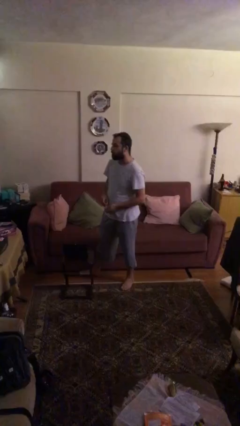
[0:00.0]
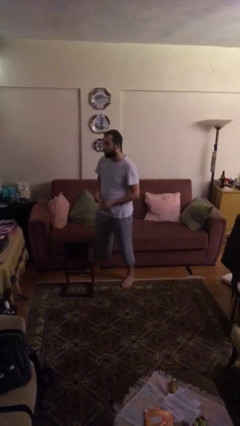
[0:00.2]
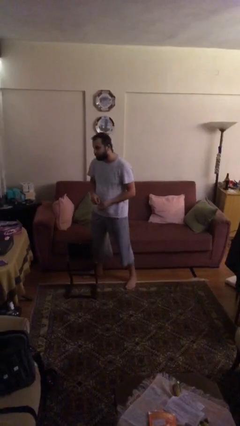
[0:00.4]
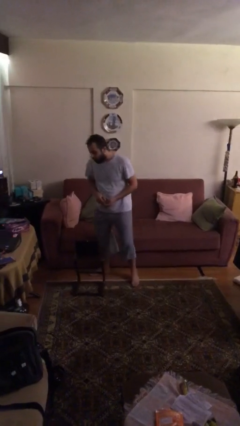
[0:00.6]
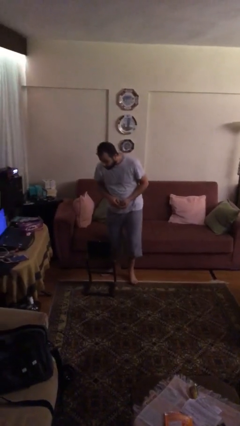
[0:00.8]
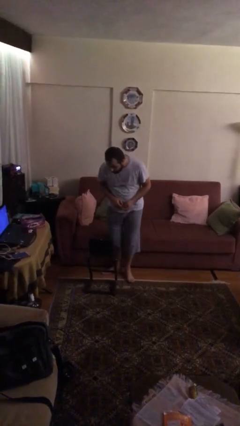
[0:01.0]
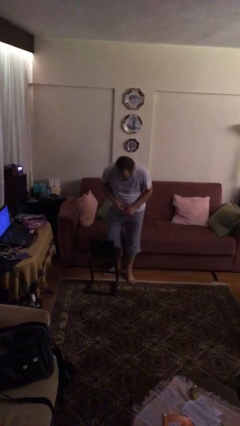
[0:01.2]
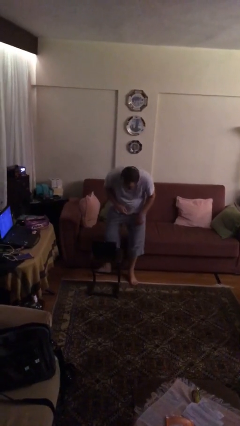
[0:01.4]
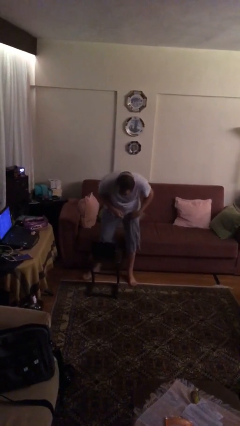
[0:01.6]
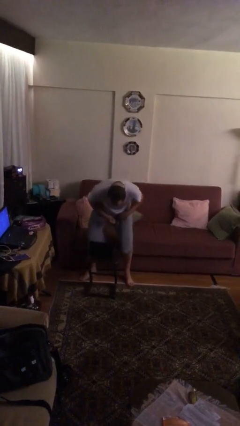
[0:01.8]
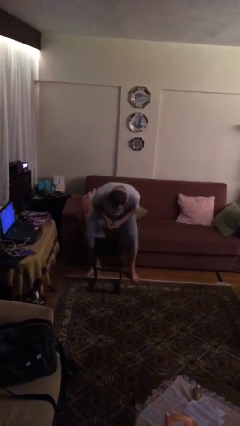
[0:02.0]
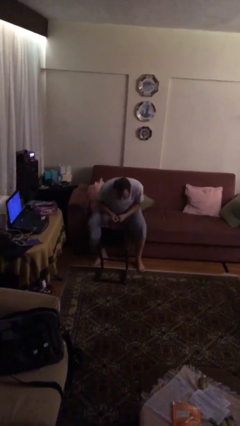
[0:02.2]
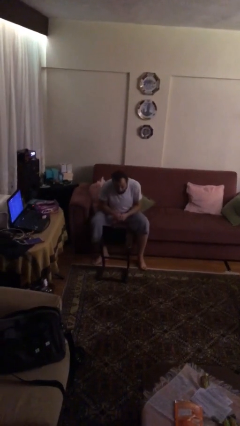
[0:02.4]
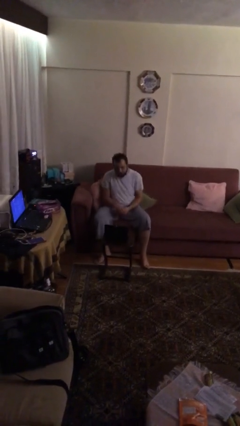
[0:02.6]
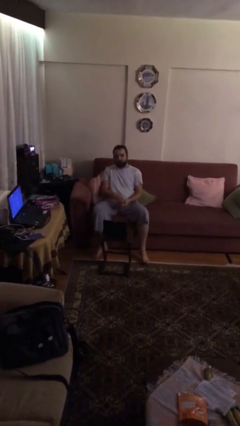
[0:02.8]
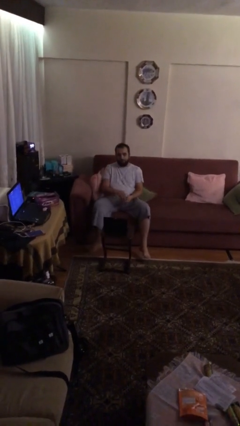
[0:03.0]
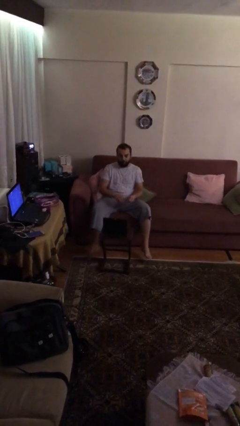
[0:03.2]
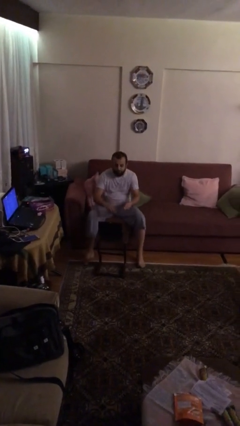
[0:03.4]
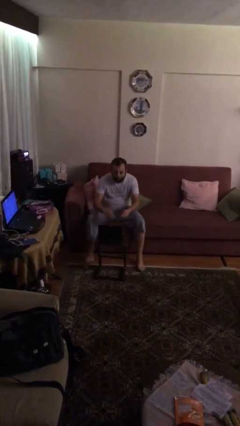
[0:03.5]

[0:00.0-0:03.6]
person sits down

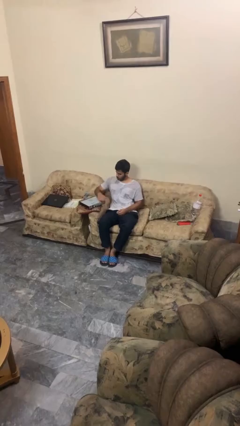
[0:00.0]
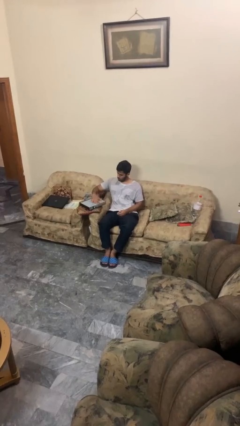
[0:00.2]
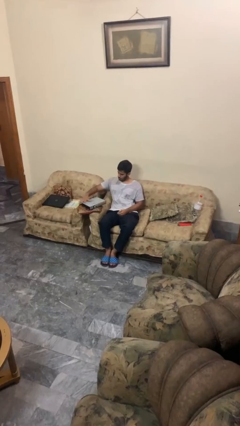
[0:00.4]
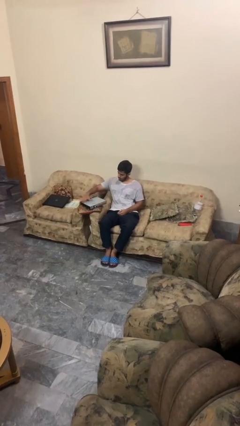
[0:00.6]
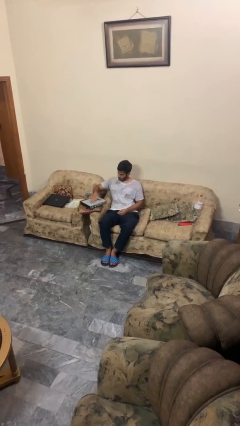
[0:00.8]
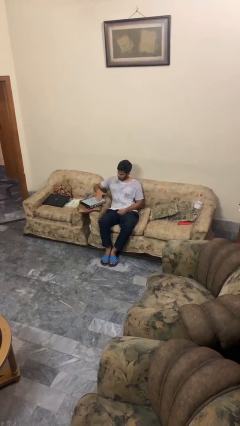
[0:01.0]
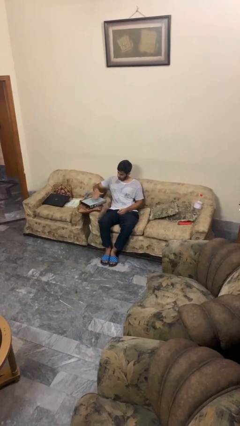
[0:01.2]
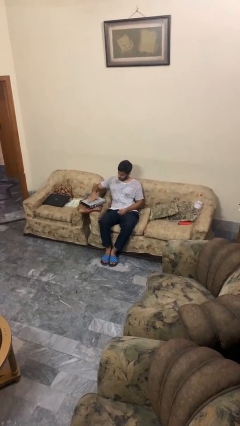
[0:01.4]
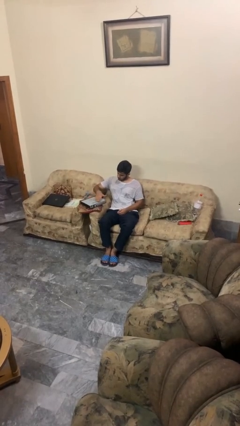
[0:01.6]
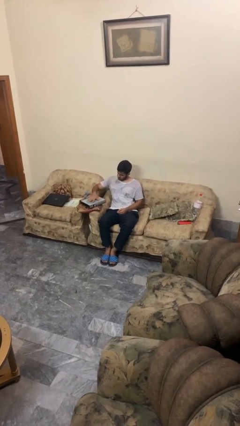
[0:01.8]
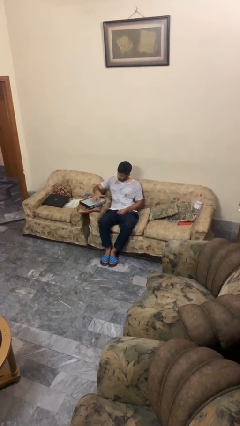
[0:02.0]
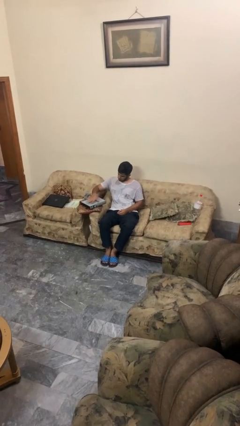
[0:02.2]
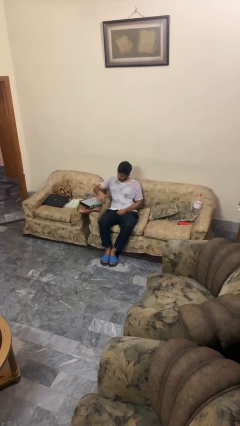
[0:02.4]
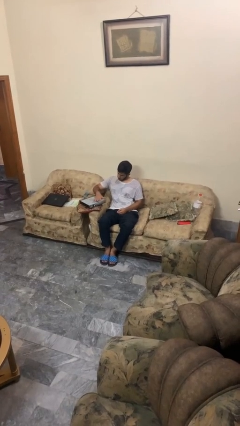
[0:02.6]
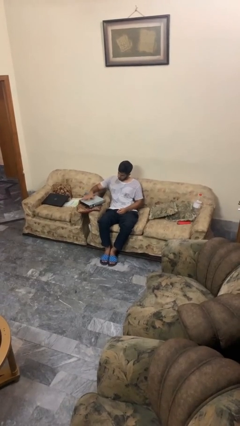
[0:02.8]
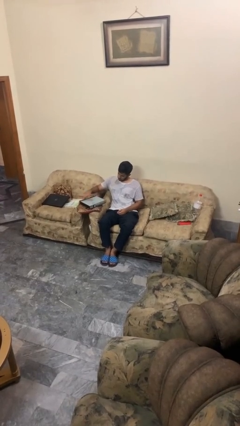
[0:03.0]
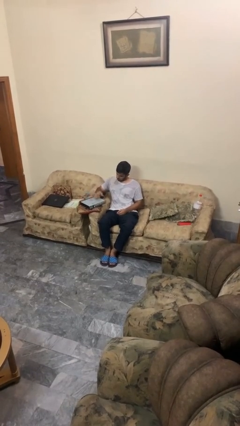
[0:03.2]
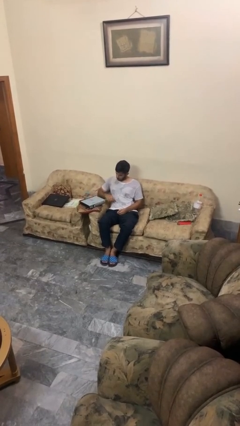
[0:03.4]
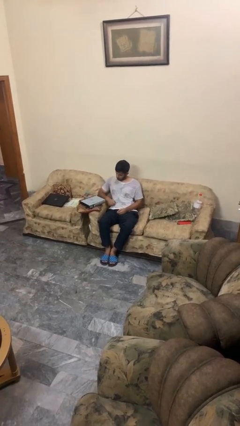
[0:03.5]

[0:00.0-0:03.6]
person waves hand over object

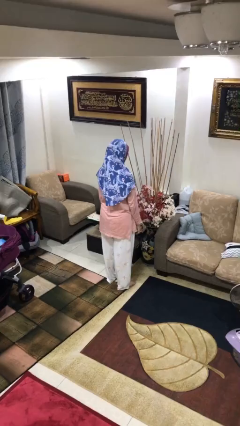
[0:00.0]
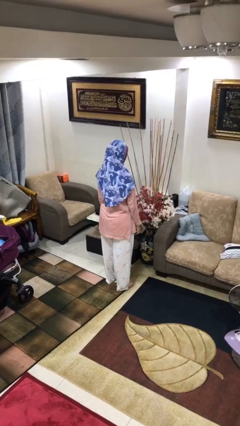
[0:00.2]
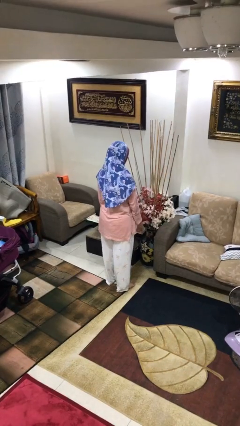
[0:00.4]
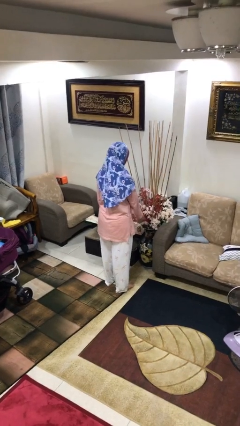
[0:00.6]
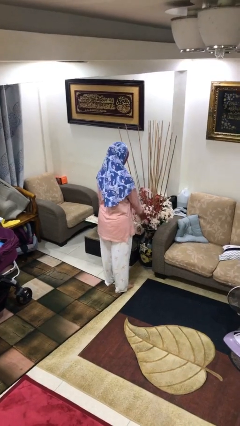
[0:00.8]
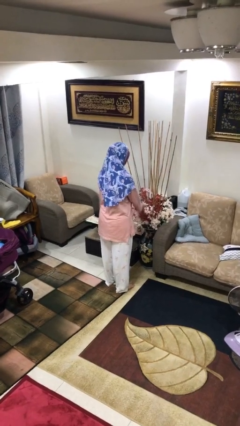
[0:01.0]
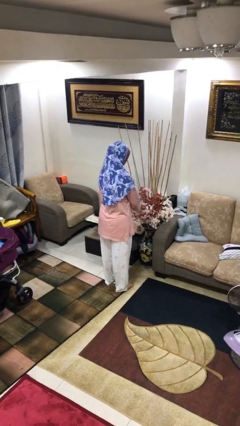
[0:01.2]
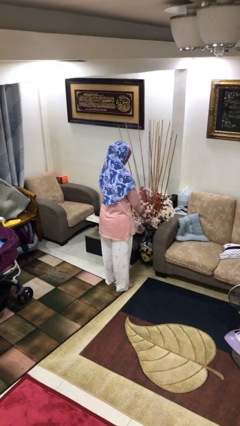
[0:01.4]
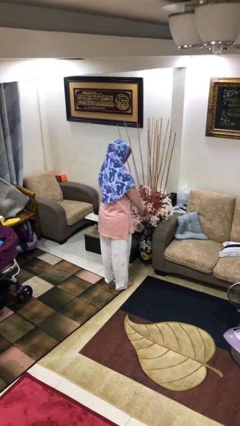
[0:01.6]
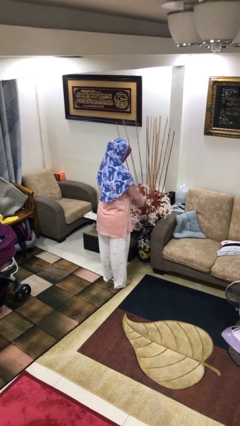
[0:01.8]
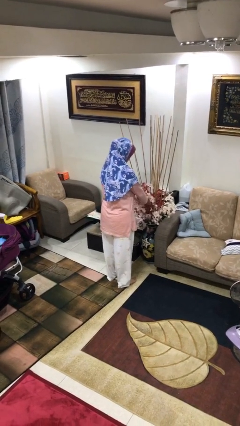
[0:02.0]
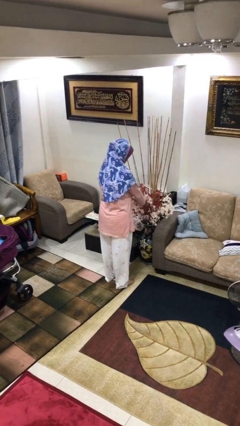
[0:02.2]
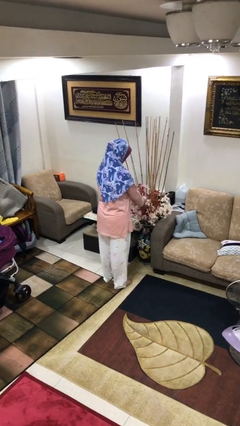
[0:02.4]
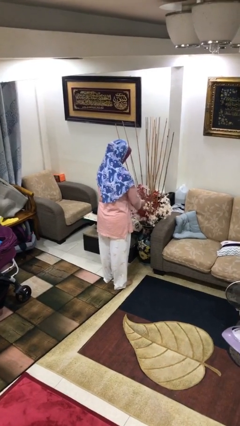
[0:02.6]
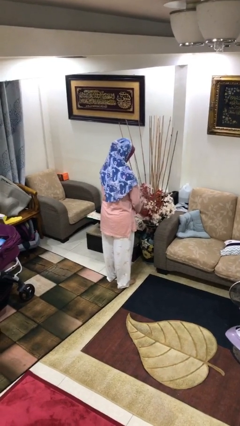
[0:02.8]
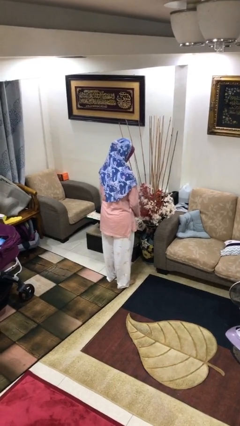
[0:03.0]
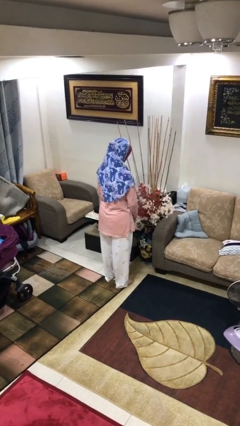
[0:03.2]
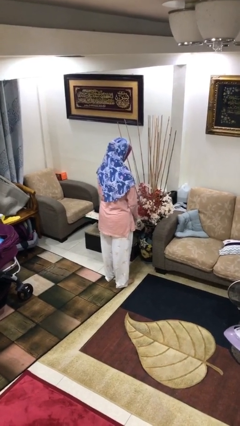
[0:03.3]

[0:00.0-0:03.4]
person arranges flowers in vase

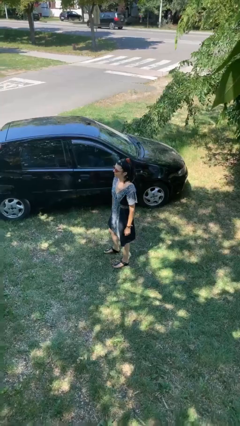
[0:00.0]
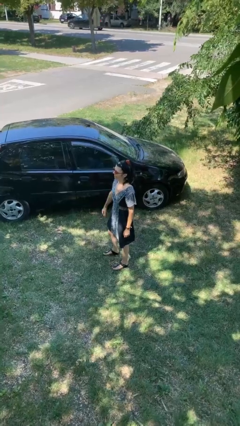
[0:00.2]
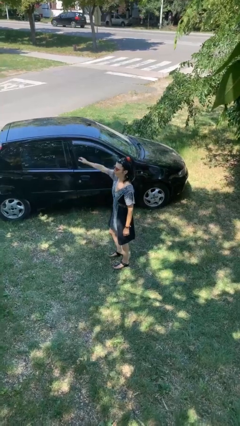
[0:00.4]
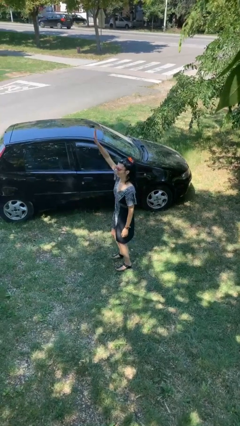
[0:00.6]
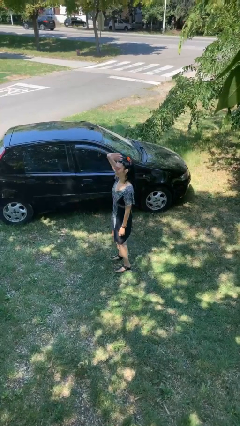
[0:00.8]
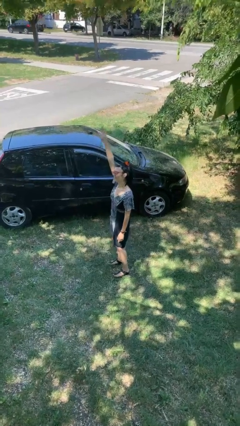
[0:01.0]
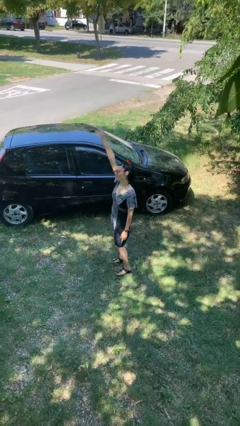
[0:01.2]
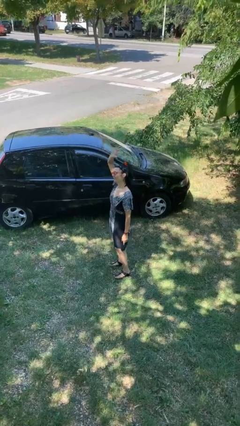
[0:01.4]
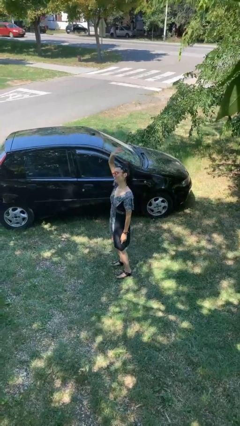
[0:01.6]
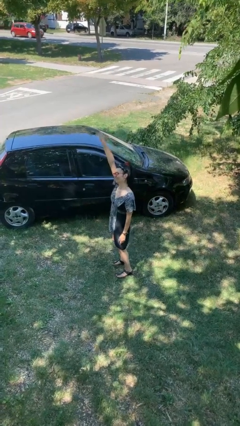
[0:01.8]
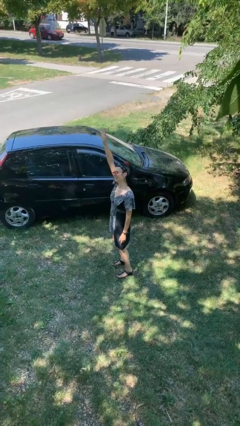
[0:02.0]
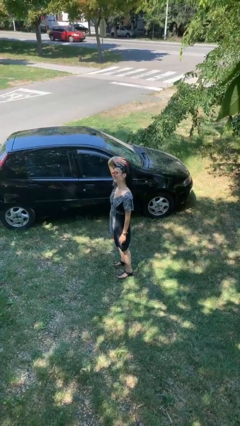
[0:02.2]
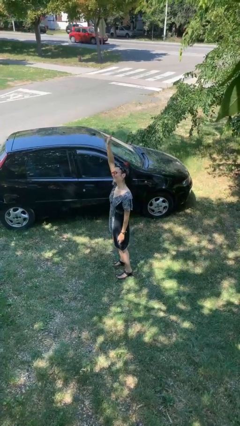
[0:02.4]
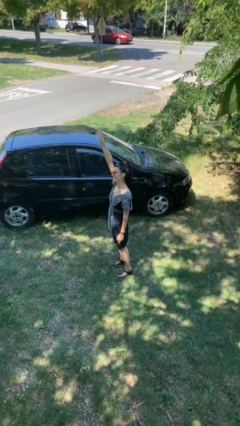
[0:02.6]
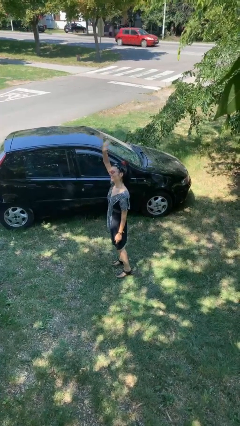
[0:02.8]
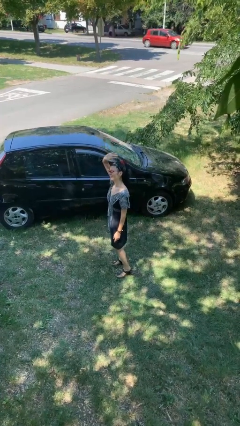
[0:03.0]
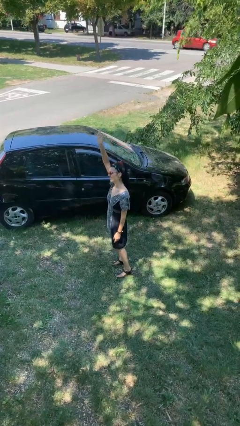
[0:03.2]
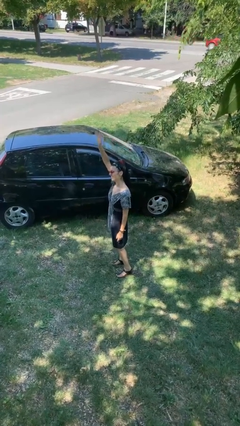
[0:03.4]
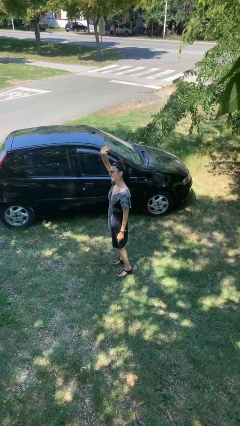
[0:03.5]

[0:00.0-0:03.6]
person waves at person

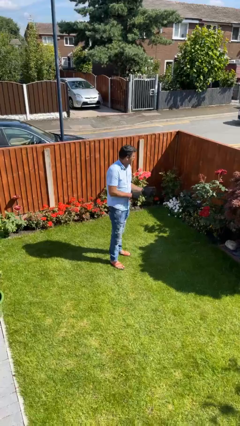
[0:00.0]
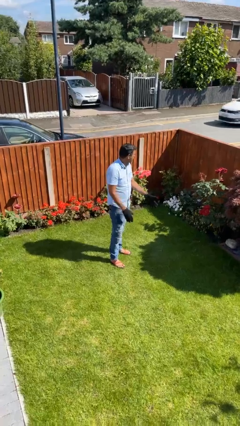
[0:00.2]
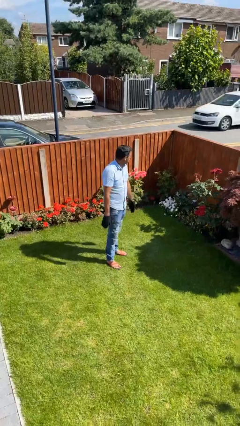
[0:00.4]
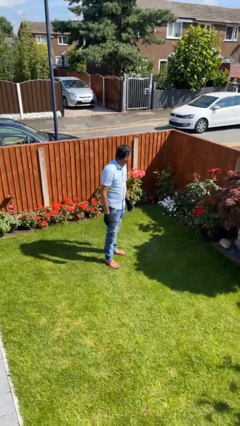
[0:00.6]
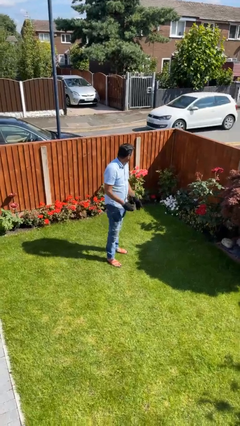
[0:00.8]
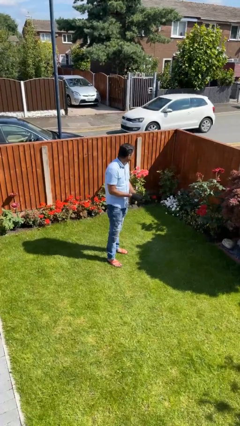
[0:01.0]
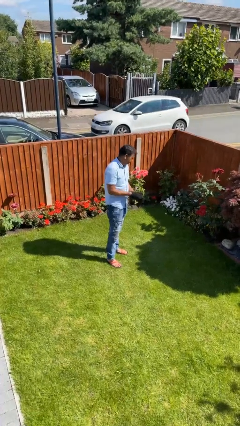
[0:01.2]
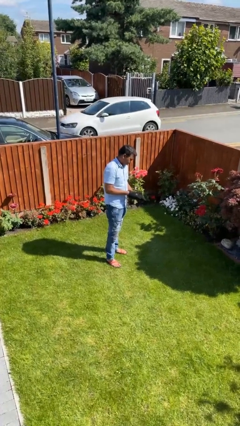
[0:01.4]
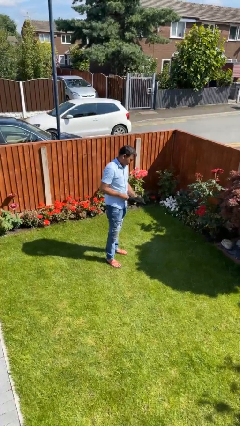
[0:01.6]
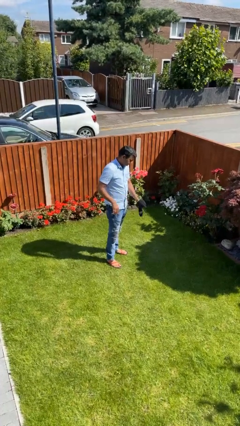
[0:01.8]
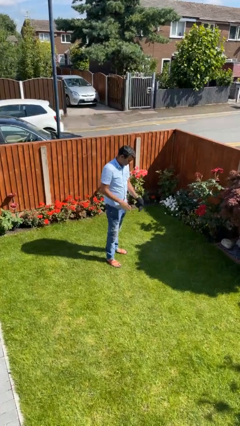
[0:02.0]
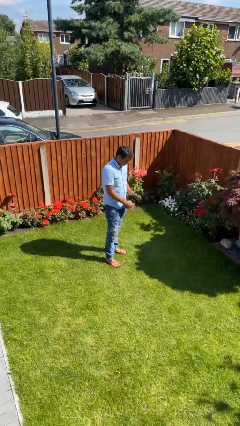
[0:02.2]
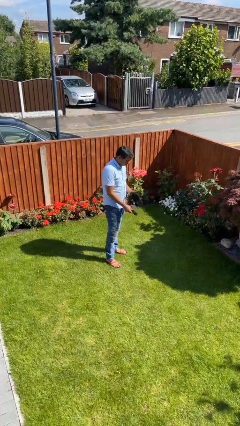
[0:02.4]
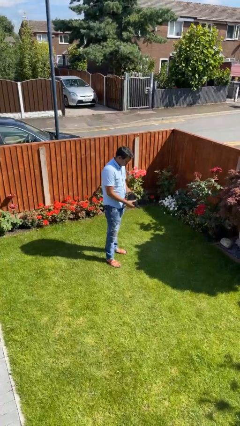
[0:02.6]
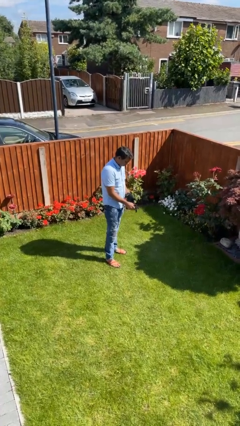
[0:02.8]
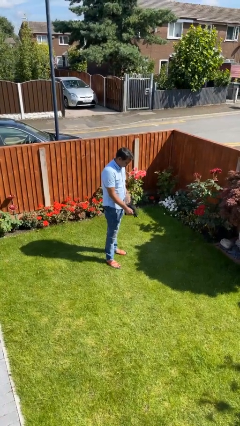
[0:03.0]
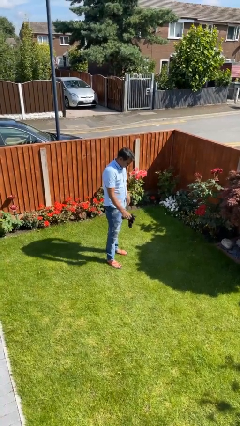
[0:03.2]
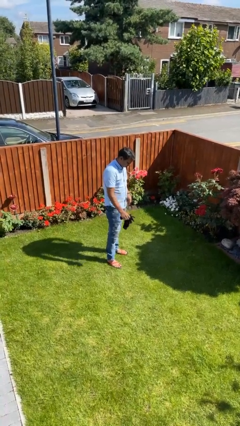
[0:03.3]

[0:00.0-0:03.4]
person takes off gloves
